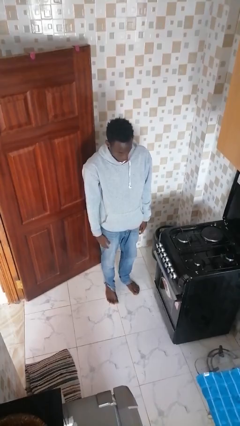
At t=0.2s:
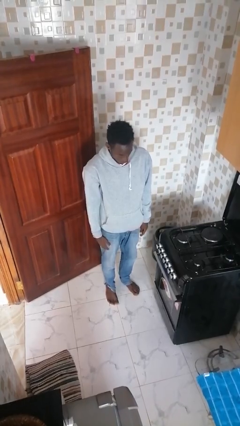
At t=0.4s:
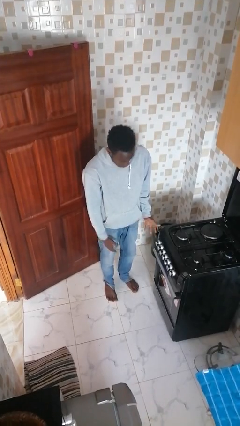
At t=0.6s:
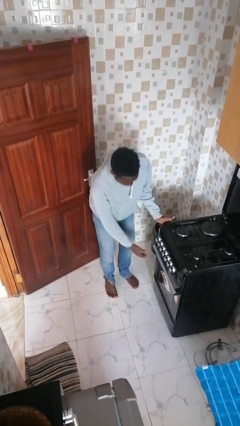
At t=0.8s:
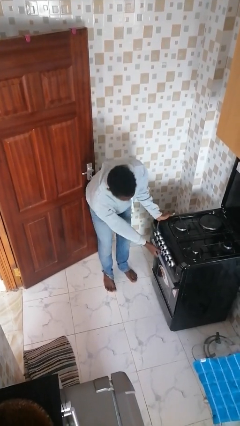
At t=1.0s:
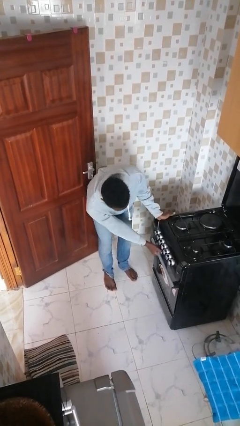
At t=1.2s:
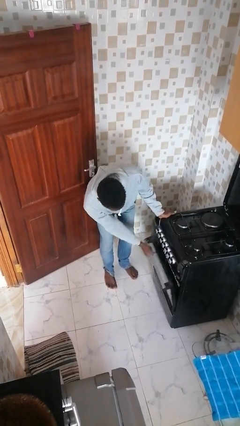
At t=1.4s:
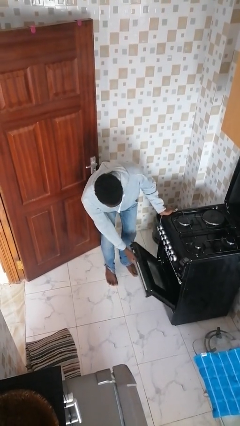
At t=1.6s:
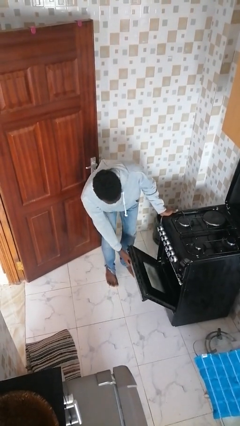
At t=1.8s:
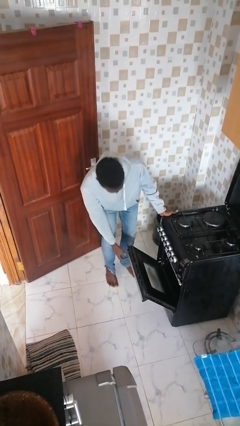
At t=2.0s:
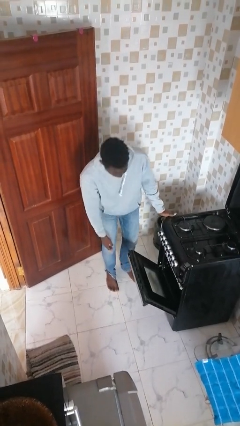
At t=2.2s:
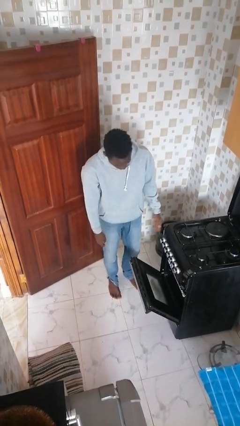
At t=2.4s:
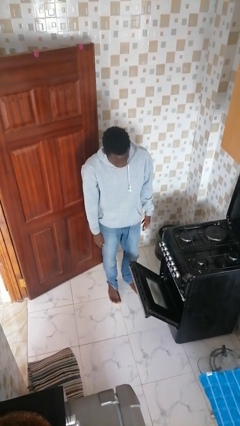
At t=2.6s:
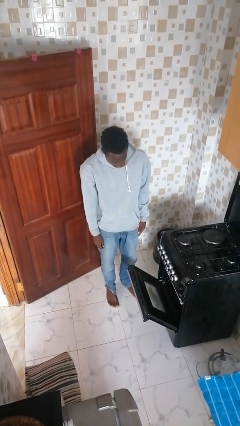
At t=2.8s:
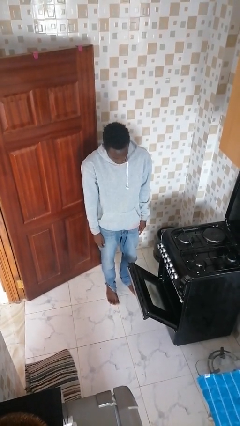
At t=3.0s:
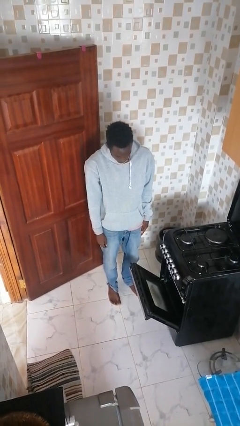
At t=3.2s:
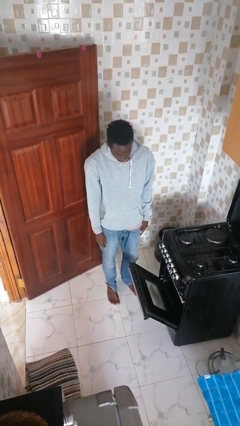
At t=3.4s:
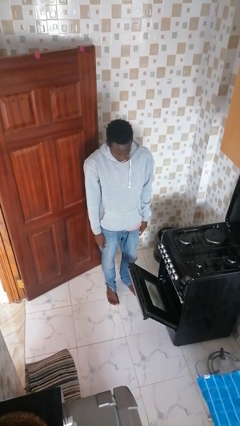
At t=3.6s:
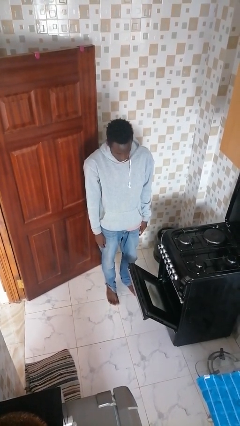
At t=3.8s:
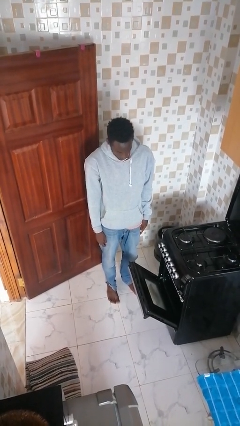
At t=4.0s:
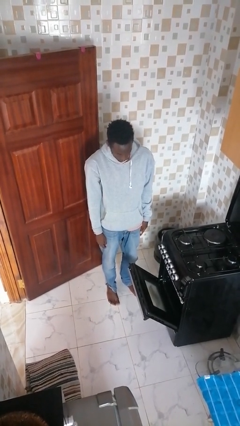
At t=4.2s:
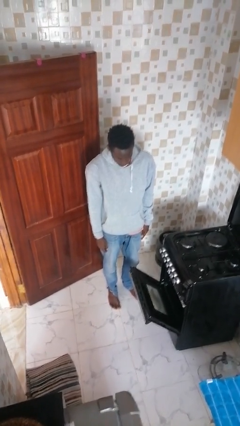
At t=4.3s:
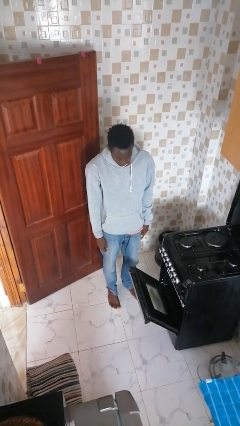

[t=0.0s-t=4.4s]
person opens oven door

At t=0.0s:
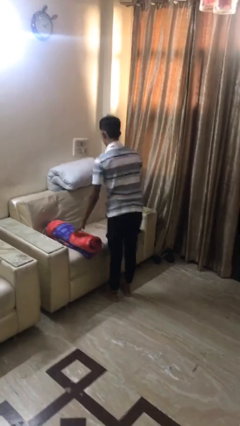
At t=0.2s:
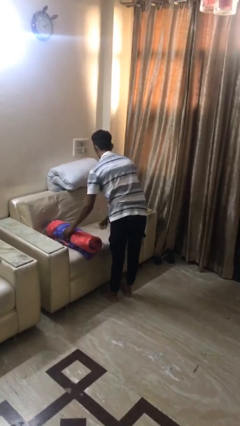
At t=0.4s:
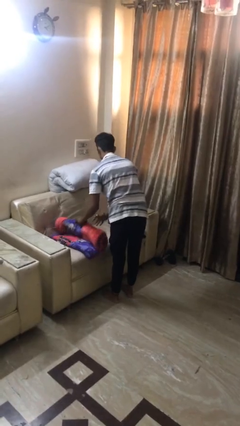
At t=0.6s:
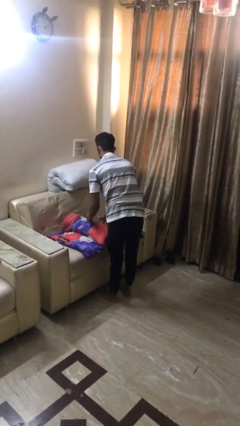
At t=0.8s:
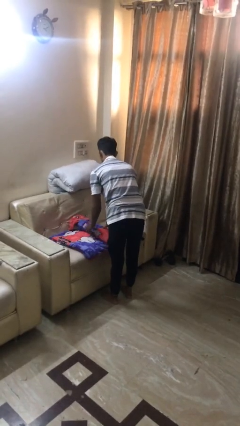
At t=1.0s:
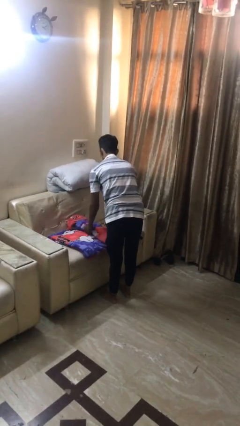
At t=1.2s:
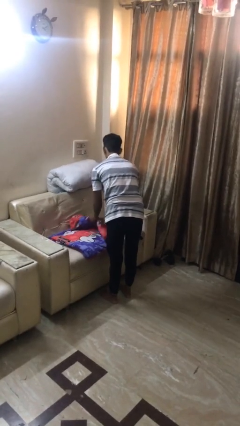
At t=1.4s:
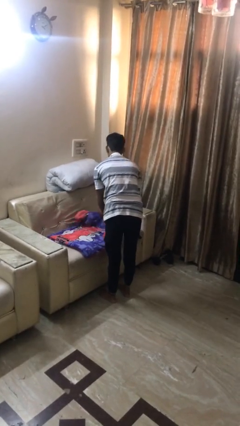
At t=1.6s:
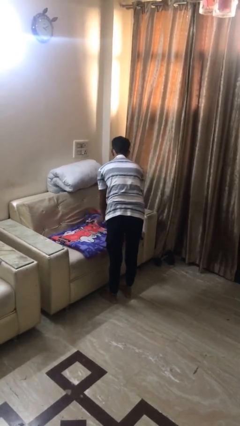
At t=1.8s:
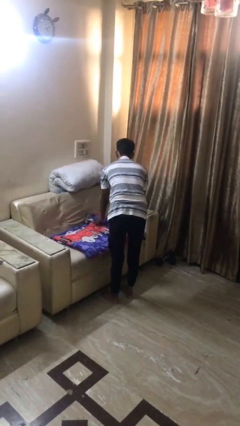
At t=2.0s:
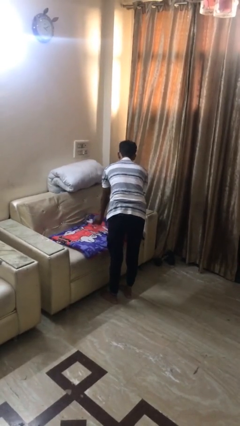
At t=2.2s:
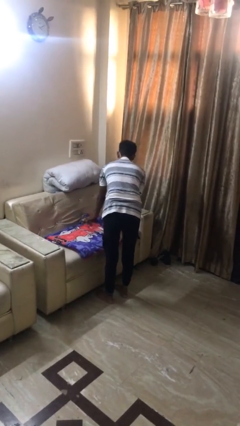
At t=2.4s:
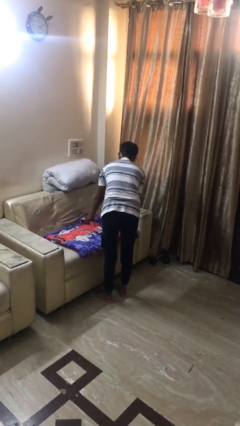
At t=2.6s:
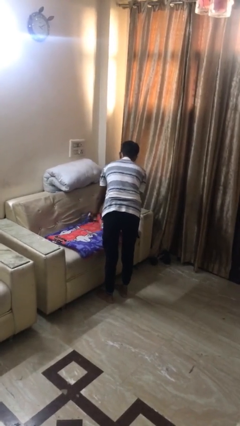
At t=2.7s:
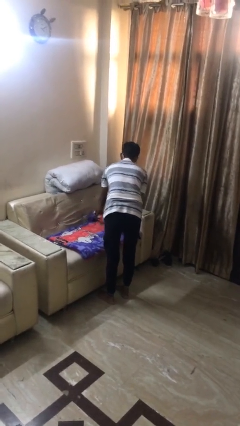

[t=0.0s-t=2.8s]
person unfolds blanket

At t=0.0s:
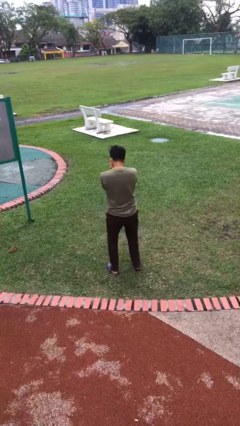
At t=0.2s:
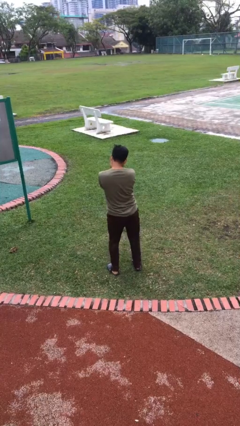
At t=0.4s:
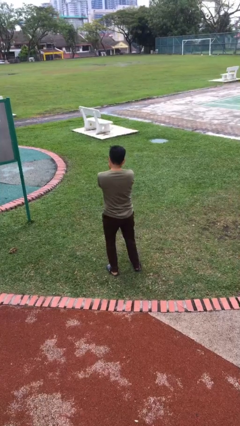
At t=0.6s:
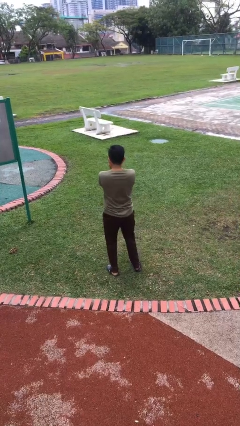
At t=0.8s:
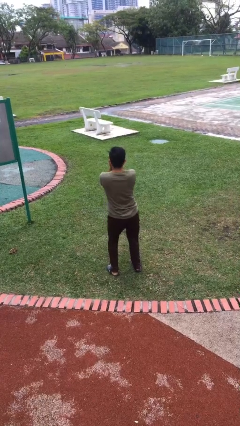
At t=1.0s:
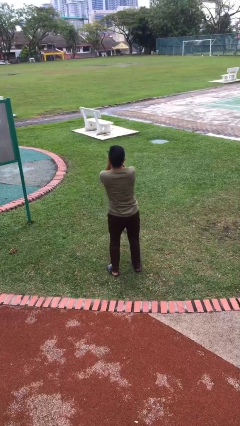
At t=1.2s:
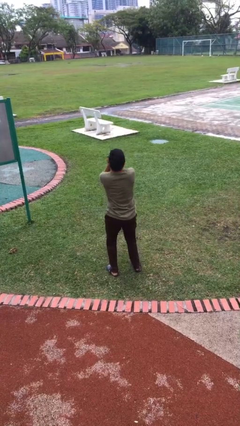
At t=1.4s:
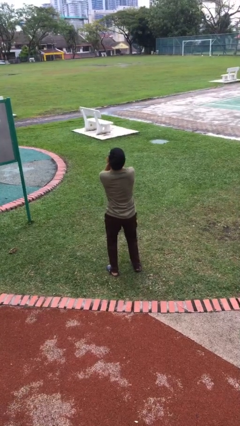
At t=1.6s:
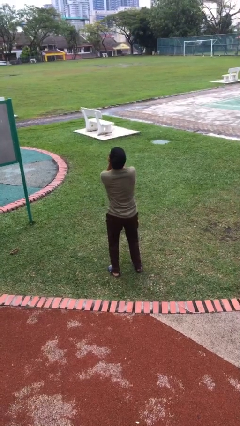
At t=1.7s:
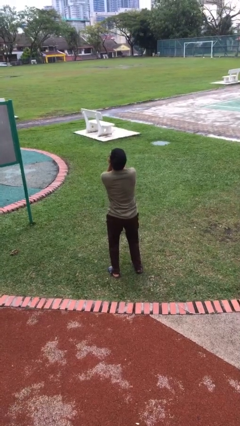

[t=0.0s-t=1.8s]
person wiggles hips

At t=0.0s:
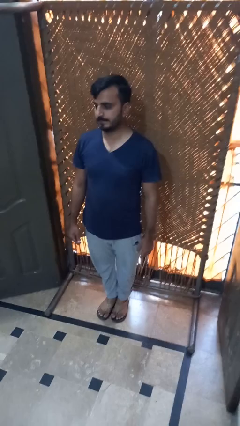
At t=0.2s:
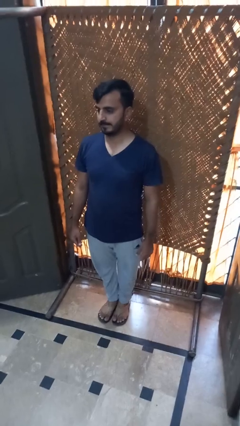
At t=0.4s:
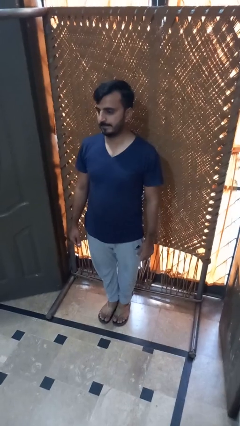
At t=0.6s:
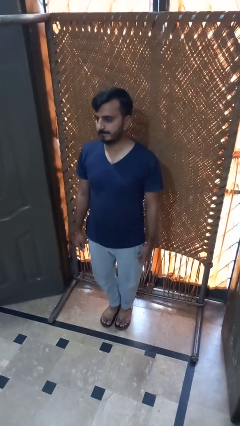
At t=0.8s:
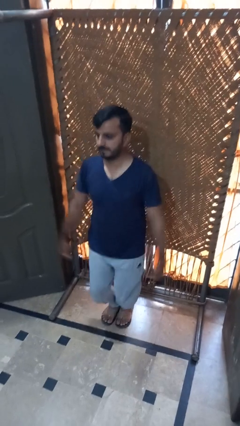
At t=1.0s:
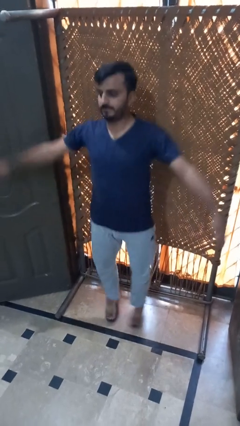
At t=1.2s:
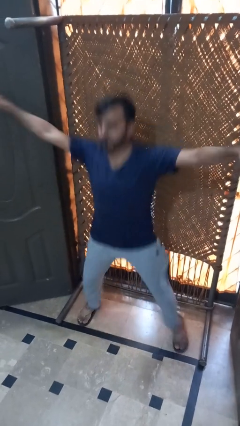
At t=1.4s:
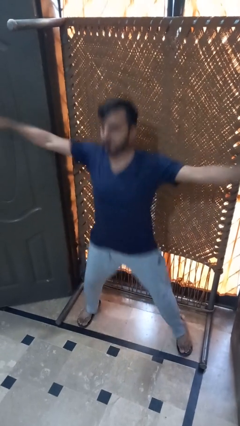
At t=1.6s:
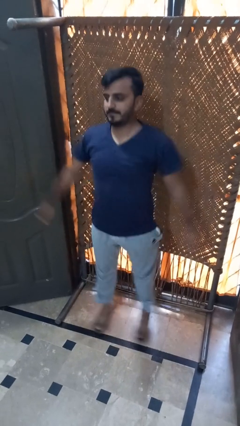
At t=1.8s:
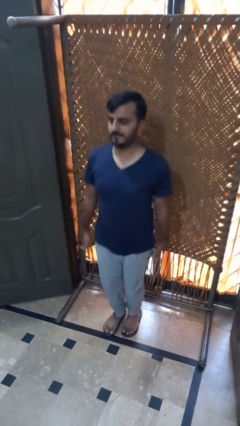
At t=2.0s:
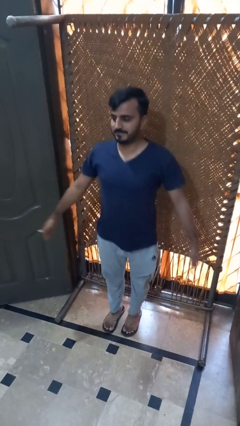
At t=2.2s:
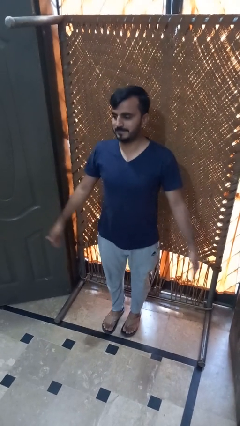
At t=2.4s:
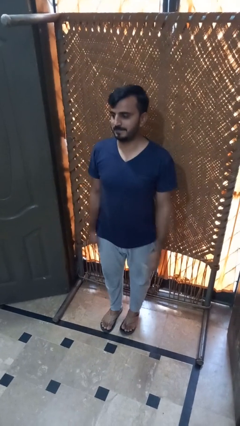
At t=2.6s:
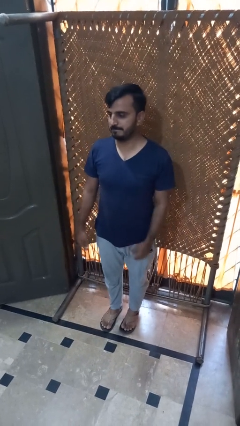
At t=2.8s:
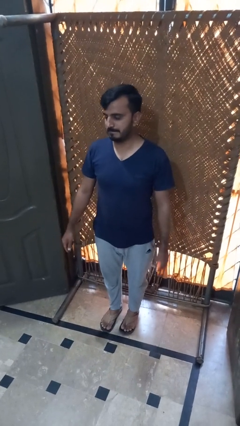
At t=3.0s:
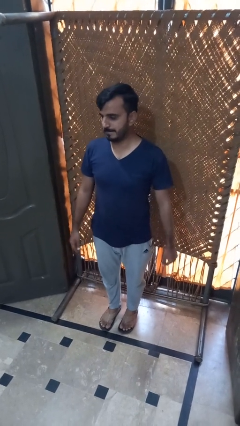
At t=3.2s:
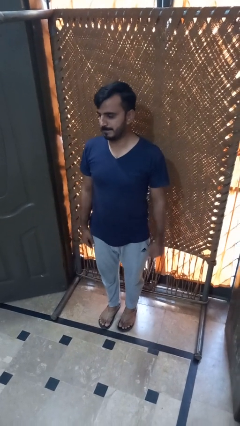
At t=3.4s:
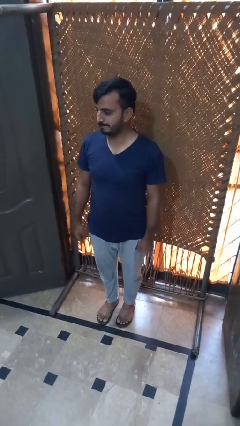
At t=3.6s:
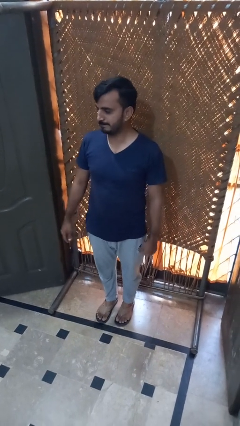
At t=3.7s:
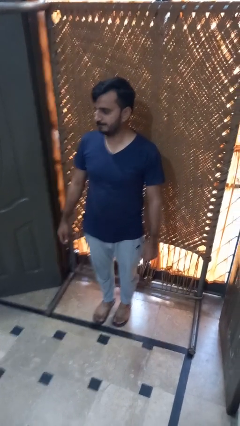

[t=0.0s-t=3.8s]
person exercises with jumping jacks

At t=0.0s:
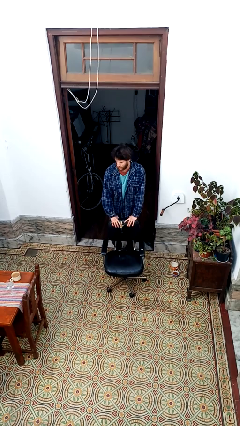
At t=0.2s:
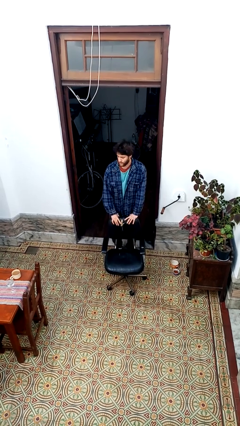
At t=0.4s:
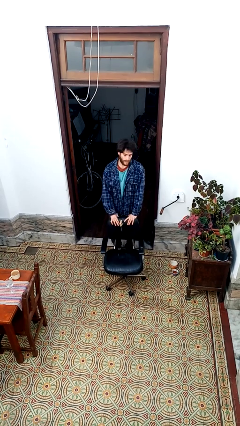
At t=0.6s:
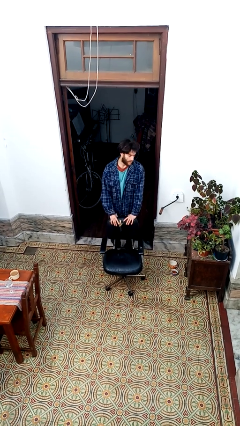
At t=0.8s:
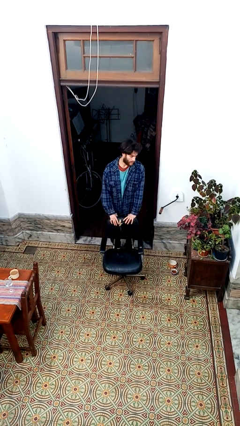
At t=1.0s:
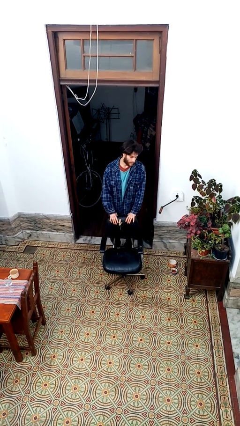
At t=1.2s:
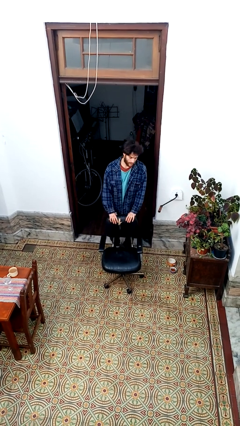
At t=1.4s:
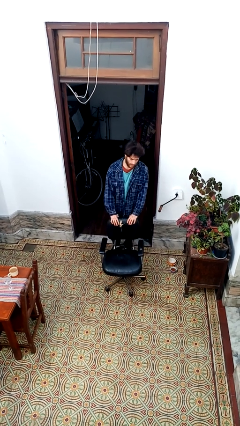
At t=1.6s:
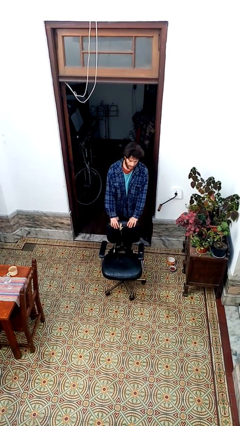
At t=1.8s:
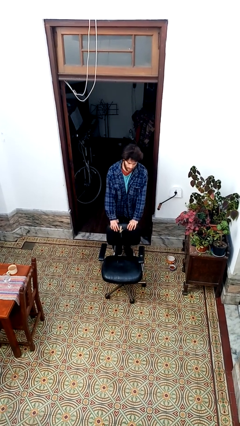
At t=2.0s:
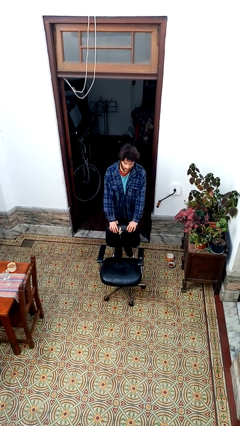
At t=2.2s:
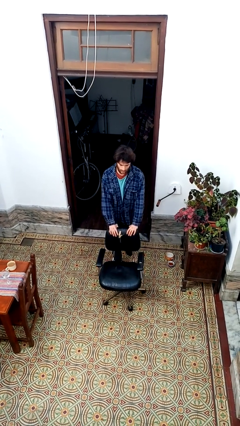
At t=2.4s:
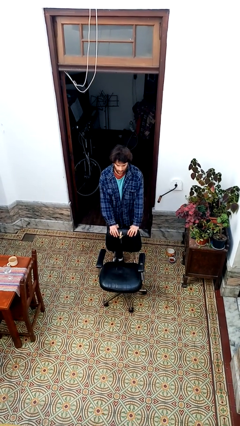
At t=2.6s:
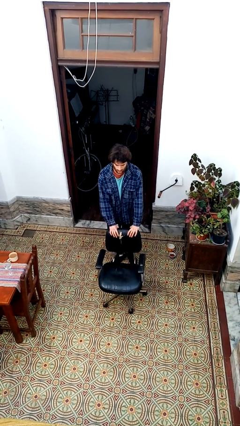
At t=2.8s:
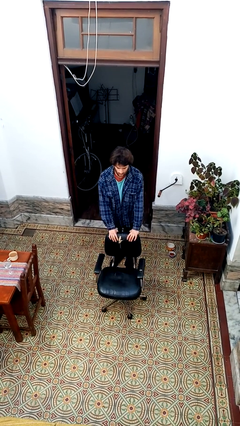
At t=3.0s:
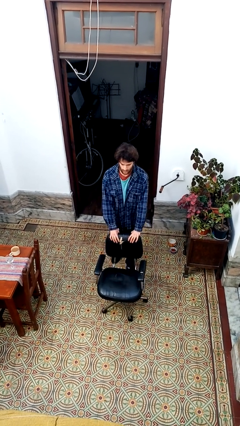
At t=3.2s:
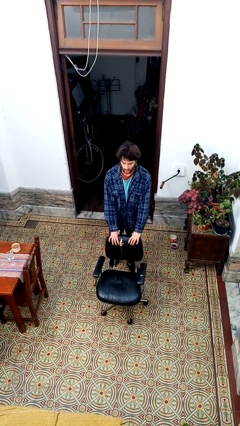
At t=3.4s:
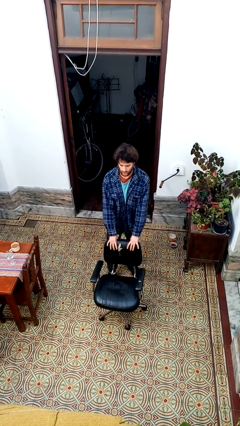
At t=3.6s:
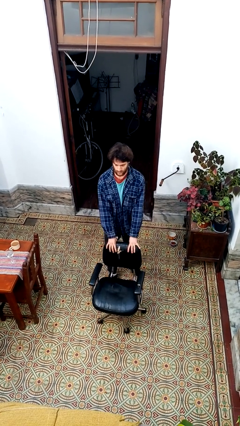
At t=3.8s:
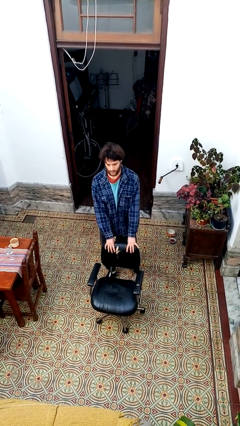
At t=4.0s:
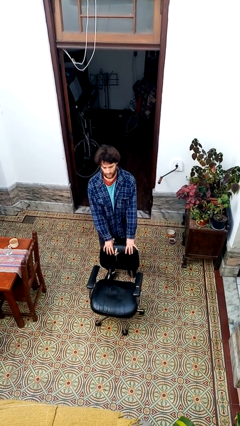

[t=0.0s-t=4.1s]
person pushes wheeled cart
